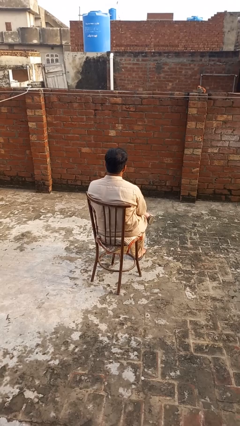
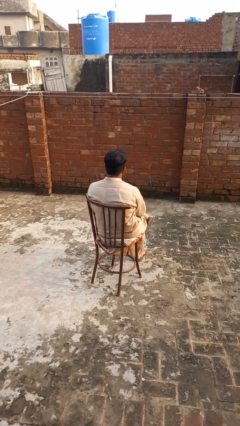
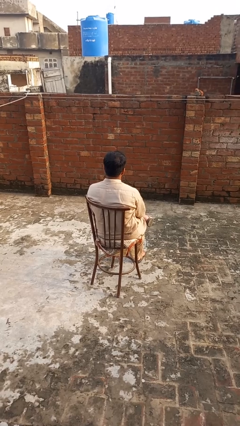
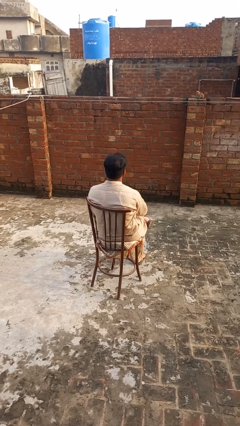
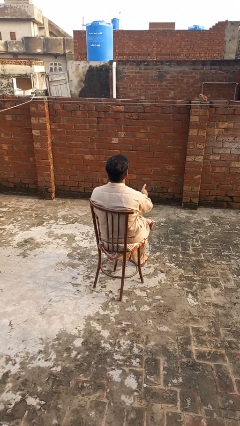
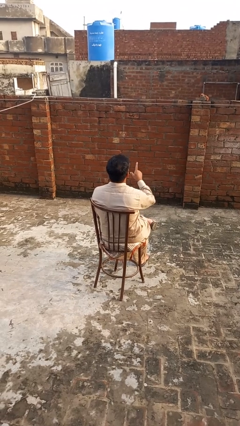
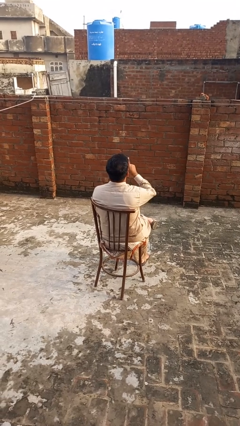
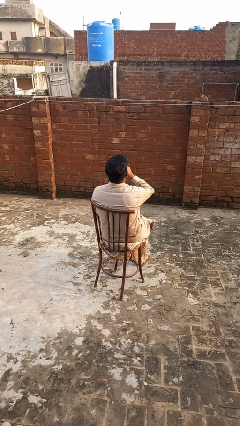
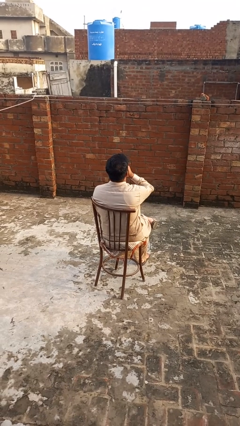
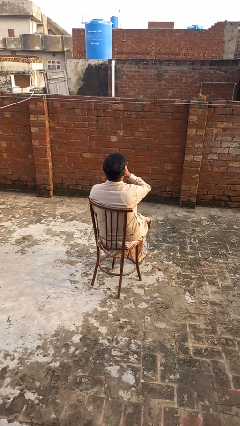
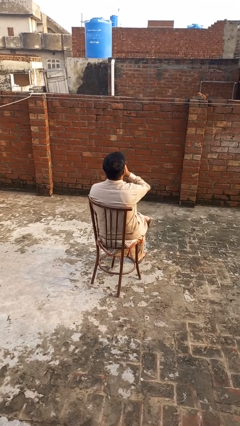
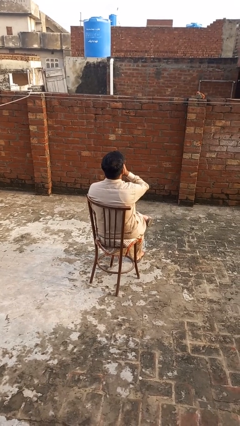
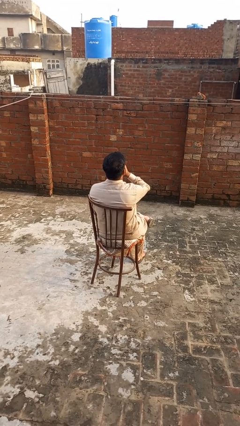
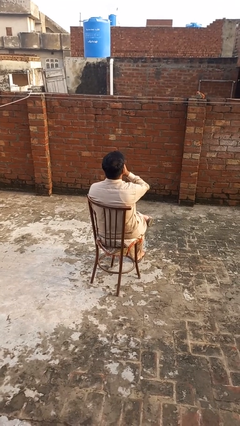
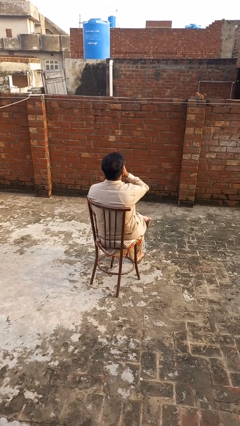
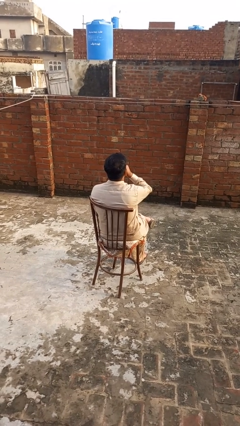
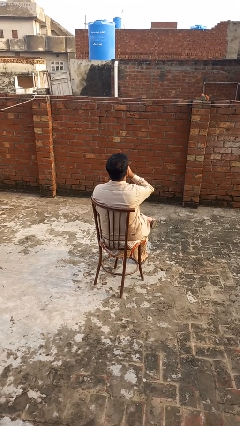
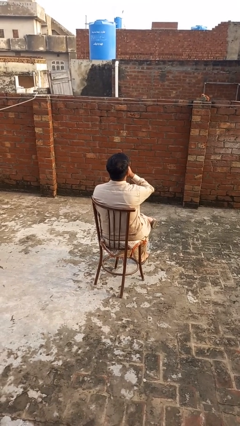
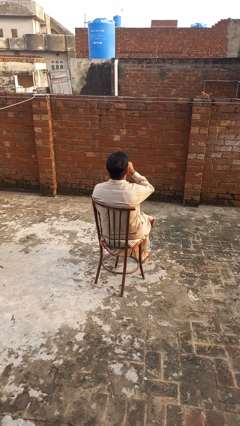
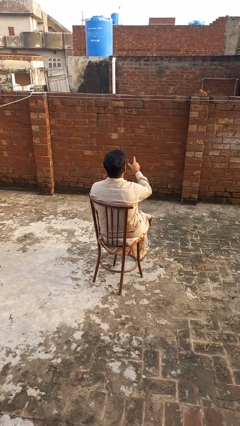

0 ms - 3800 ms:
person gestures be quiet

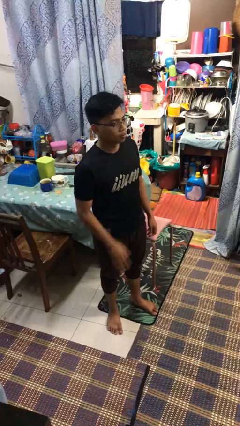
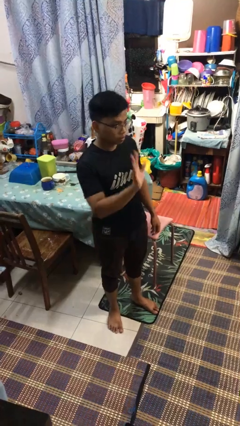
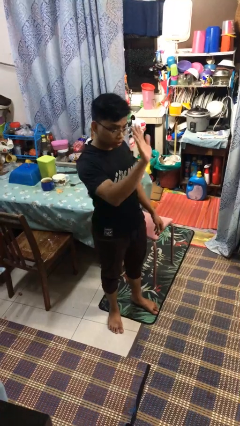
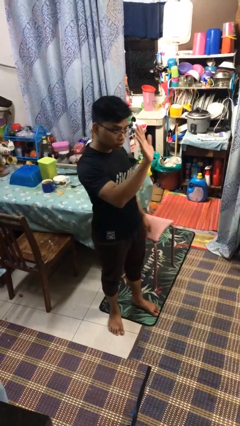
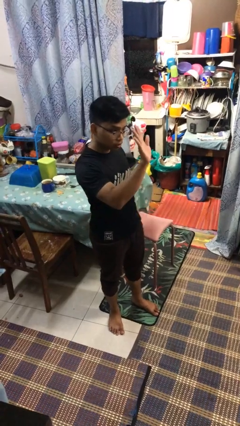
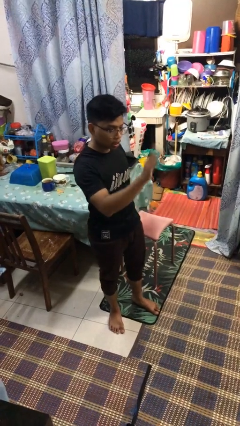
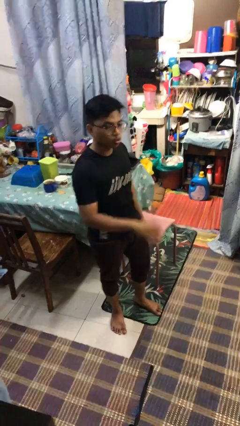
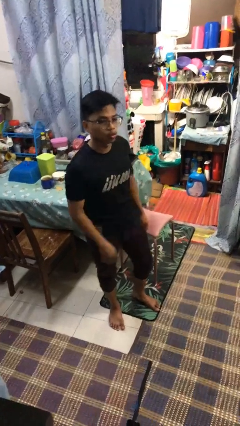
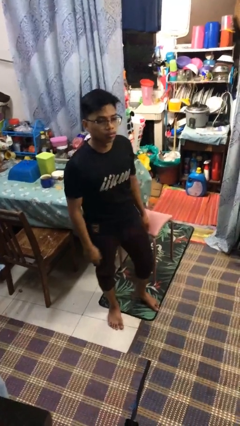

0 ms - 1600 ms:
person gestures stop

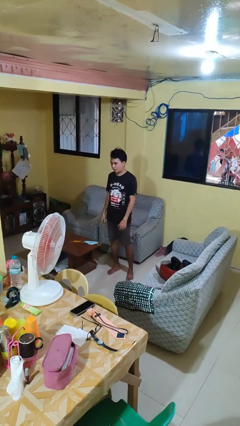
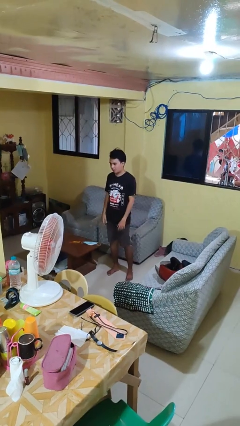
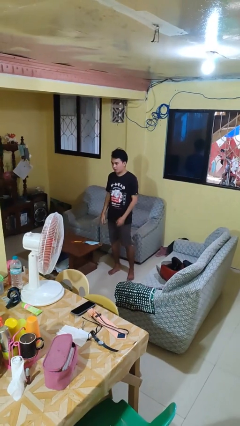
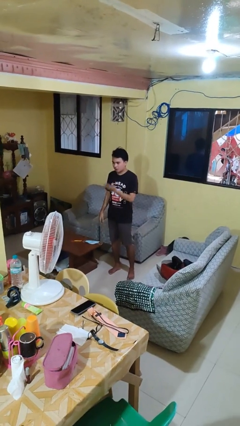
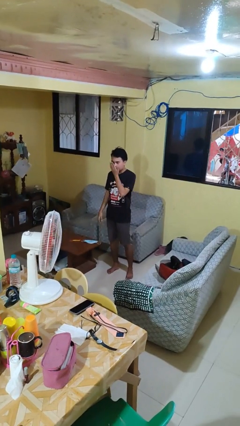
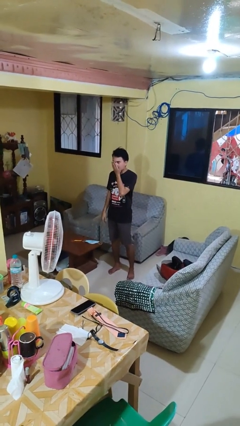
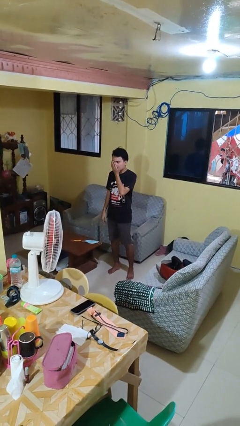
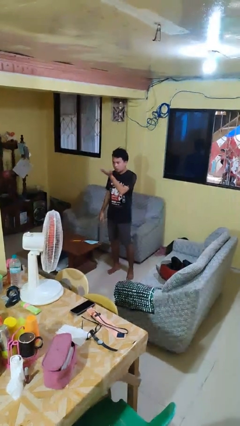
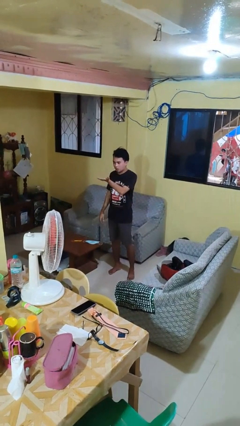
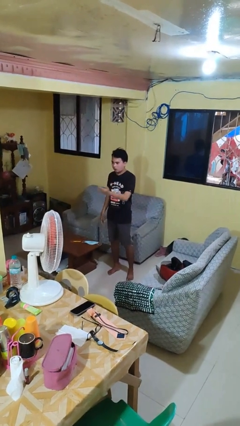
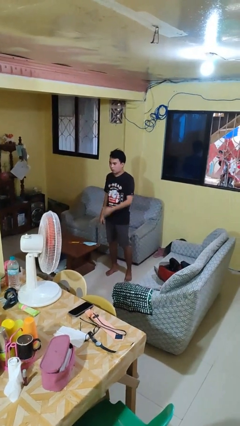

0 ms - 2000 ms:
person gestures blow kiss

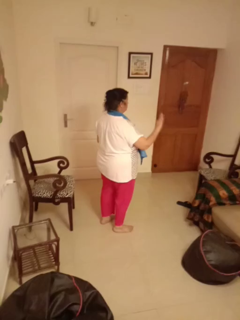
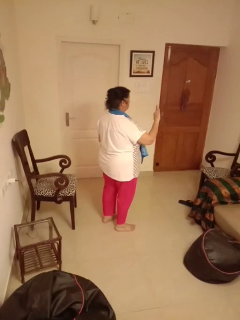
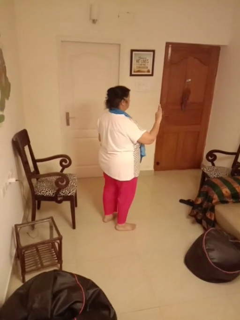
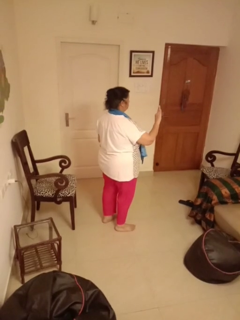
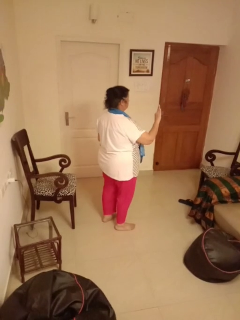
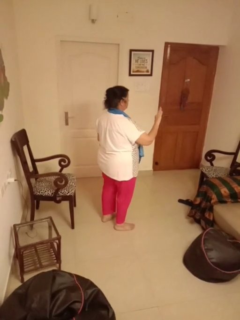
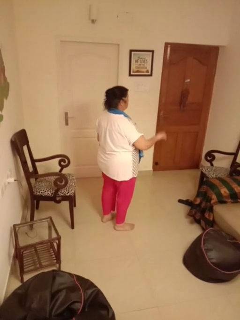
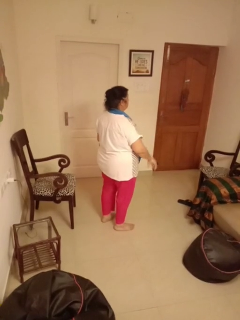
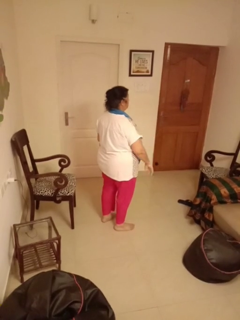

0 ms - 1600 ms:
person gestures number three

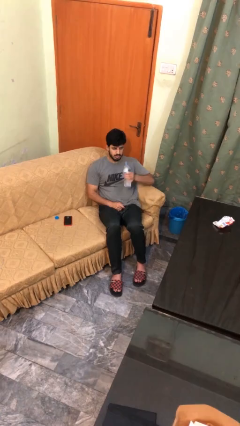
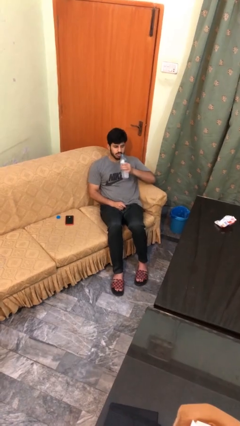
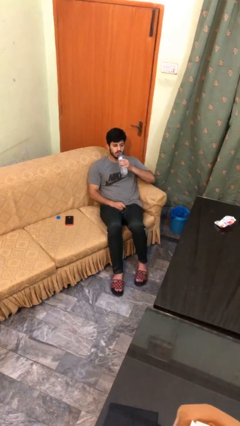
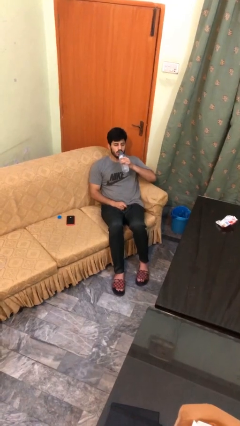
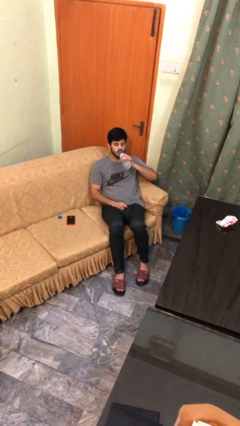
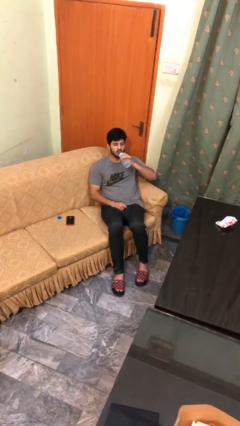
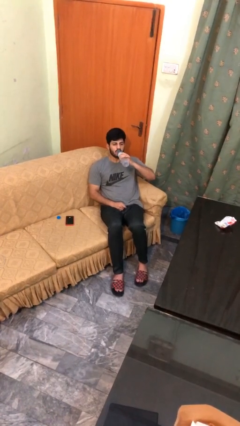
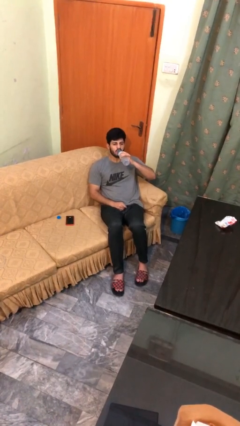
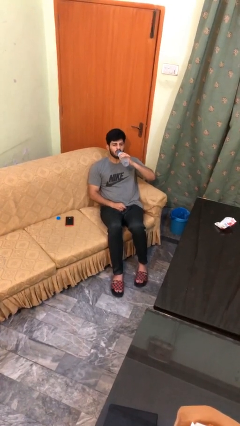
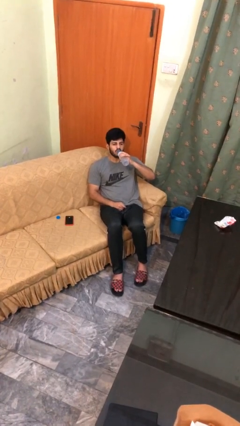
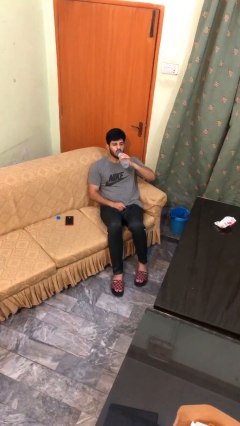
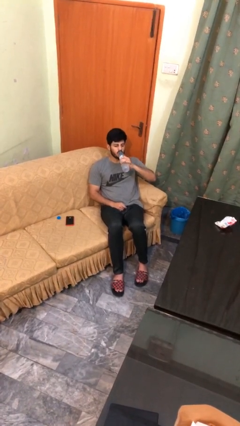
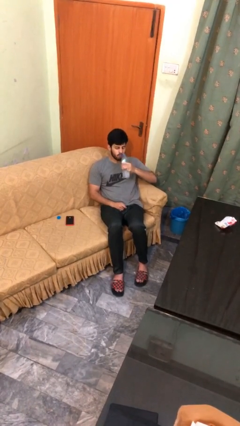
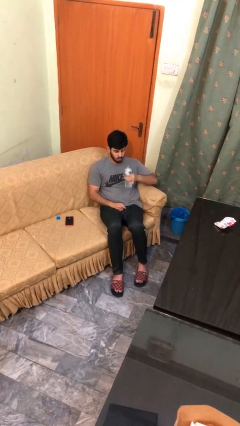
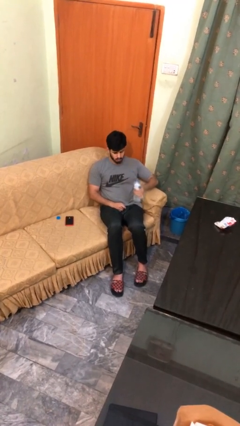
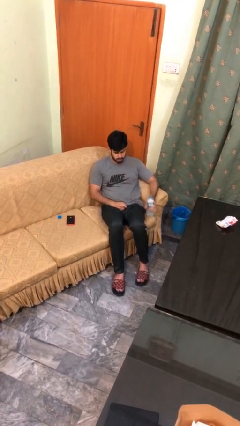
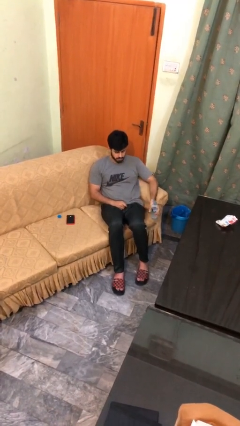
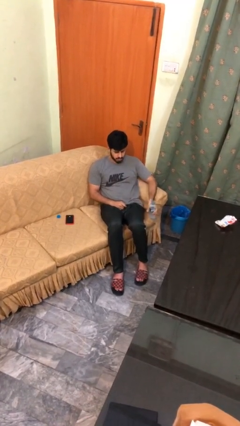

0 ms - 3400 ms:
person drinks from bottle

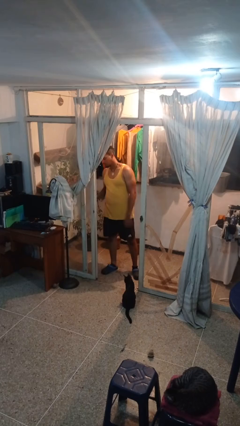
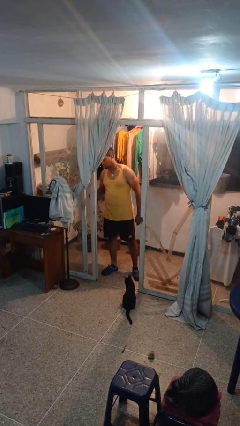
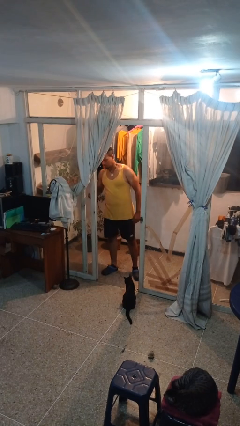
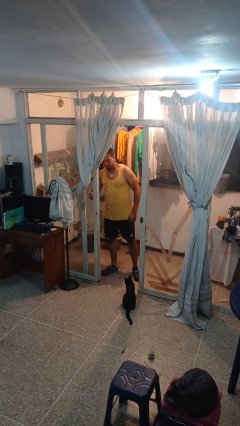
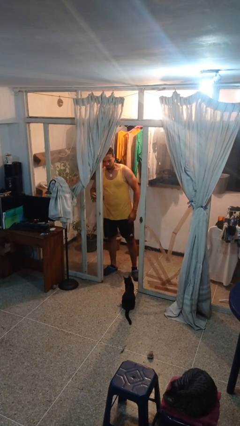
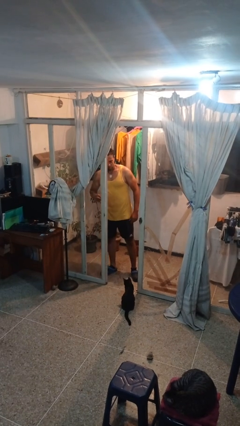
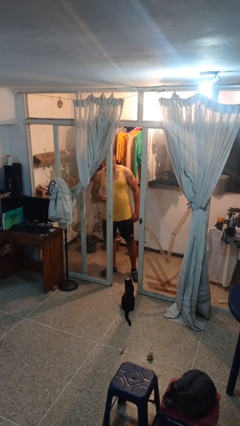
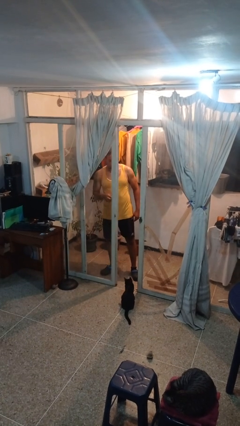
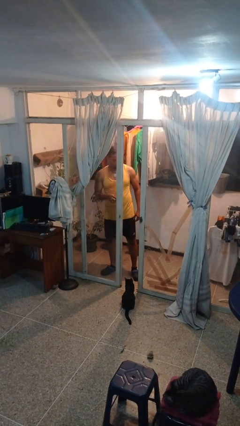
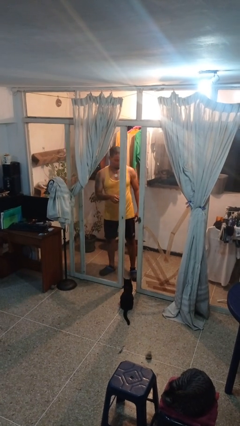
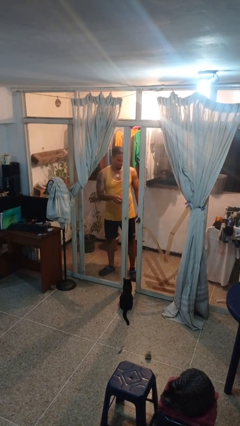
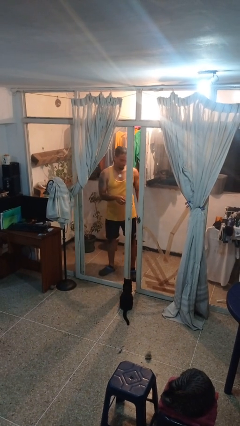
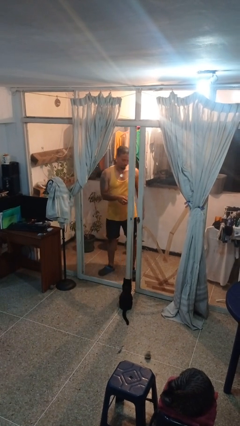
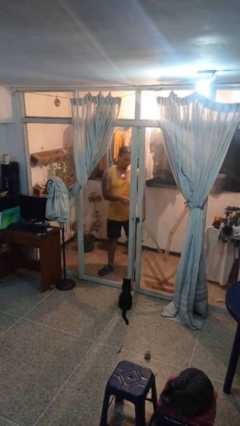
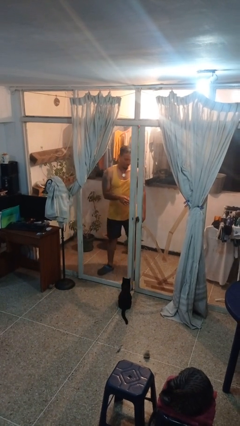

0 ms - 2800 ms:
person closes sliding door

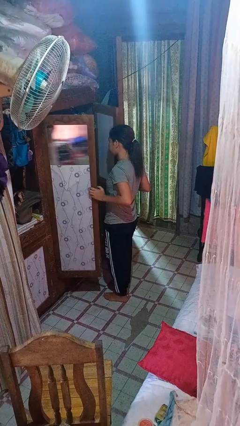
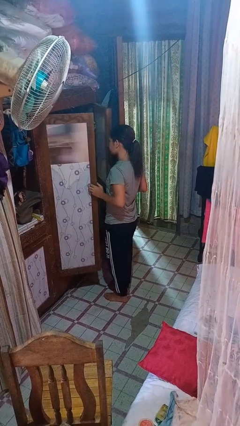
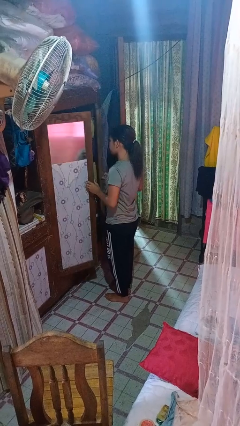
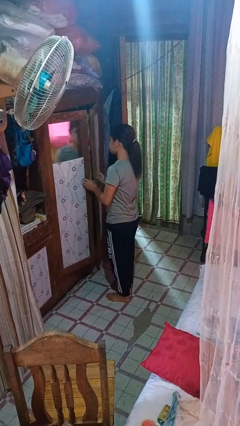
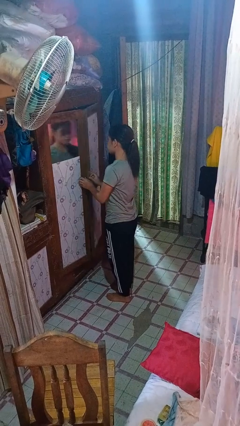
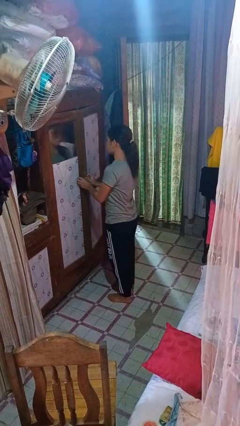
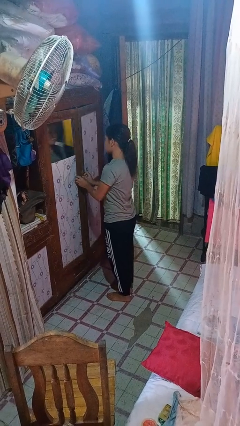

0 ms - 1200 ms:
person closes closet door

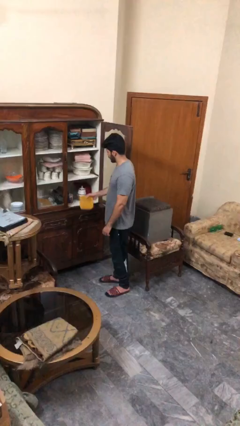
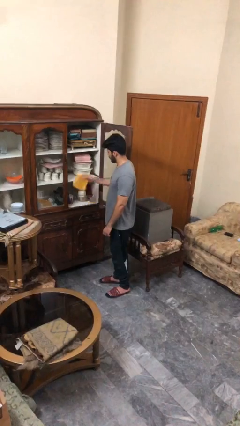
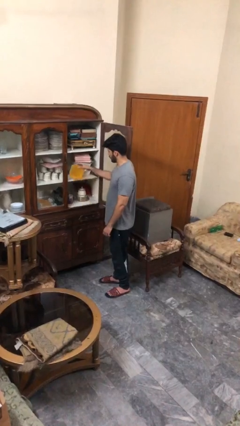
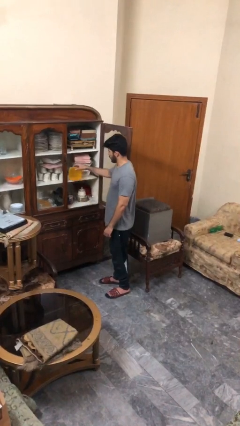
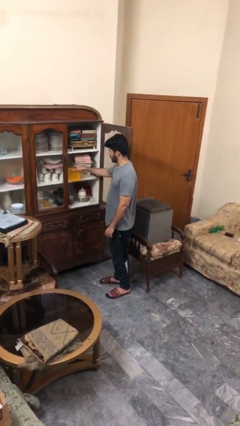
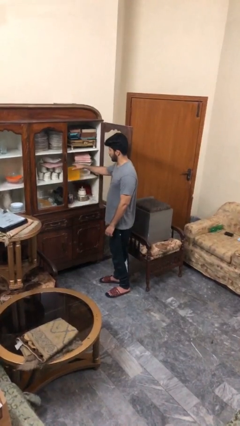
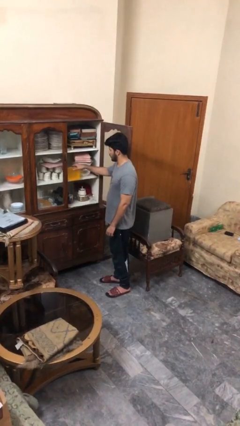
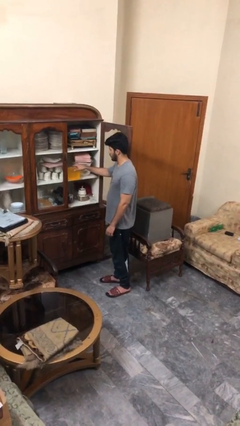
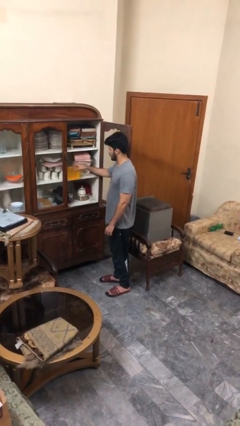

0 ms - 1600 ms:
person puts down object into cabinet
